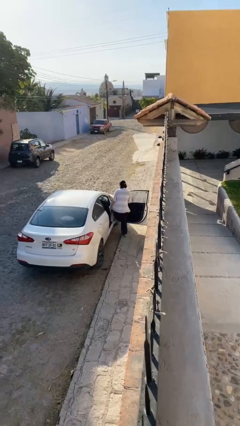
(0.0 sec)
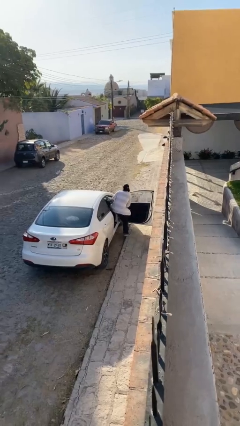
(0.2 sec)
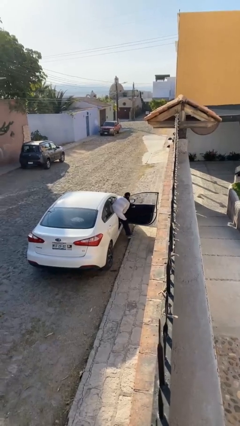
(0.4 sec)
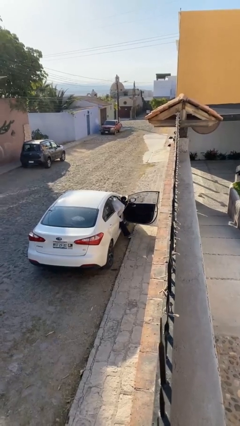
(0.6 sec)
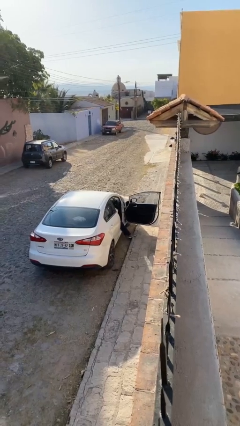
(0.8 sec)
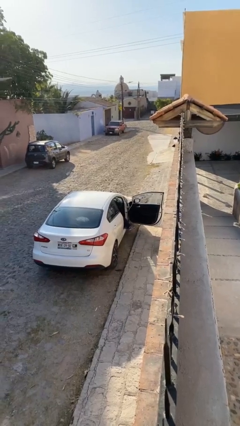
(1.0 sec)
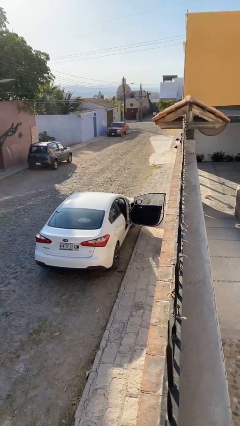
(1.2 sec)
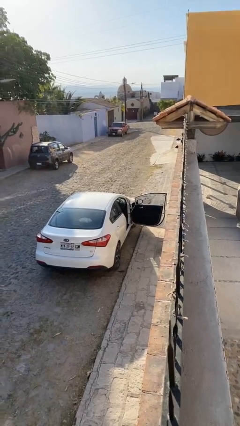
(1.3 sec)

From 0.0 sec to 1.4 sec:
person enters car

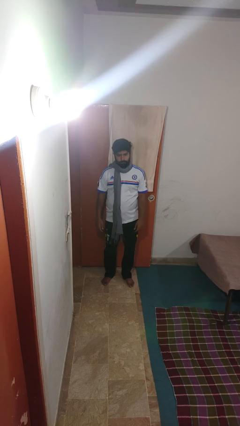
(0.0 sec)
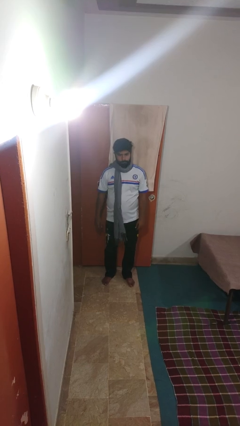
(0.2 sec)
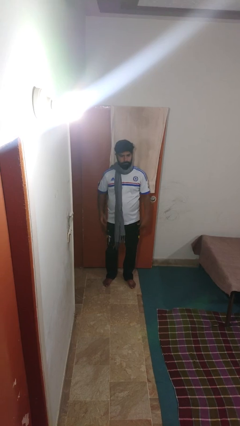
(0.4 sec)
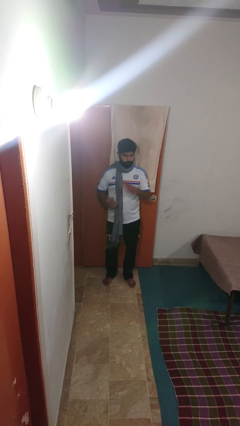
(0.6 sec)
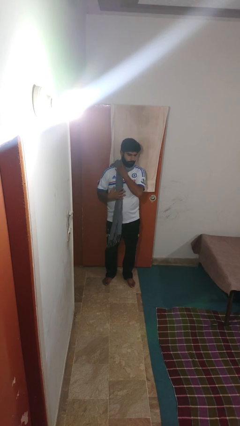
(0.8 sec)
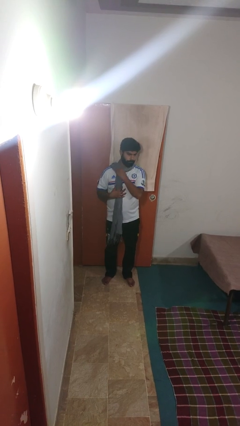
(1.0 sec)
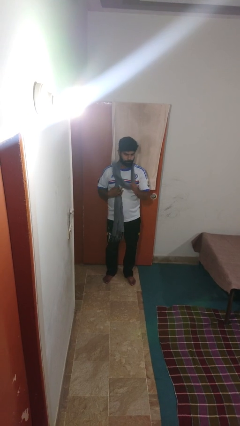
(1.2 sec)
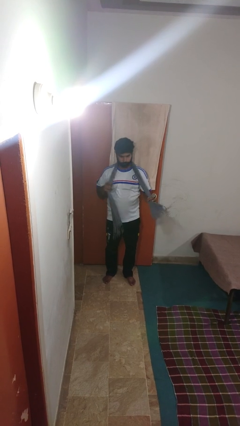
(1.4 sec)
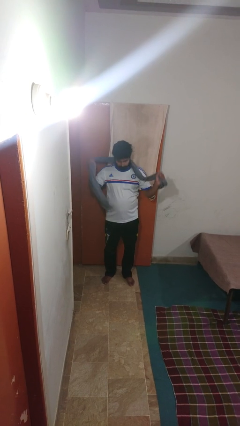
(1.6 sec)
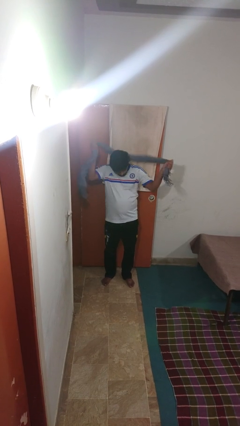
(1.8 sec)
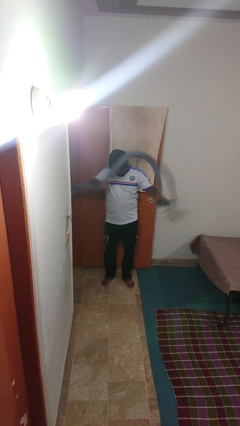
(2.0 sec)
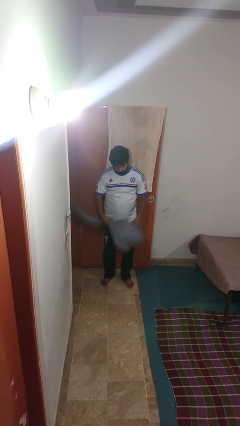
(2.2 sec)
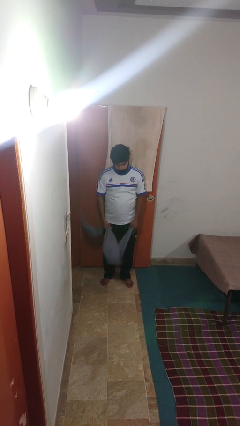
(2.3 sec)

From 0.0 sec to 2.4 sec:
person takes off scarf

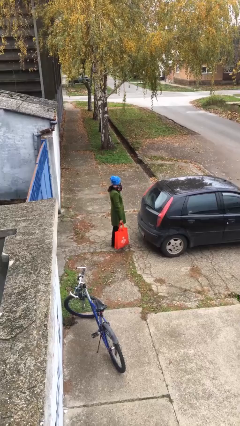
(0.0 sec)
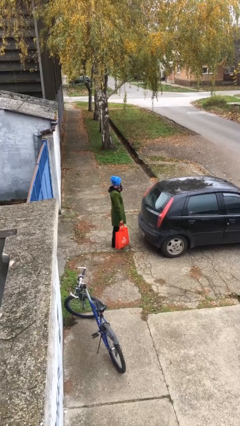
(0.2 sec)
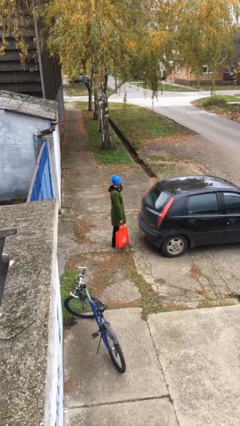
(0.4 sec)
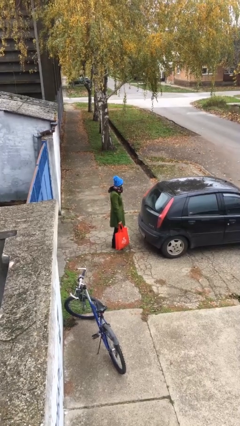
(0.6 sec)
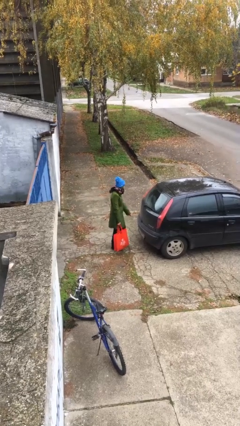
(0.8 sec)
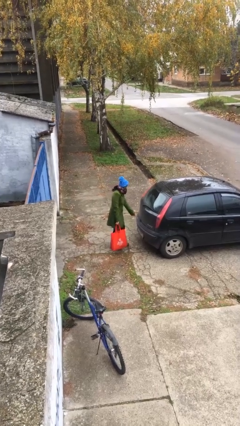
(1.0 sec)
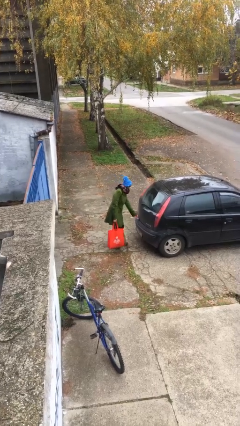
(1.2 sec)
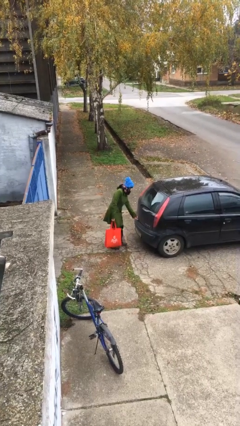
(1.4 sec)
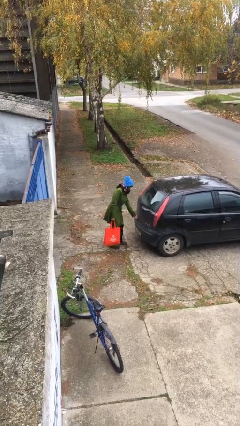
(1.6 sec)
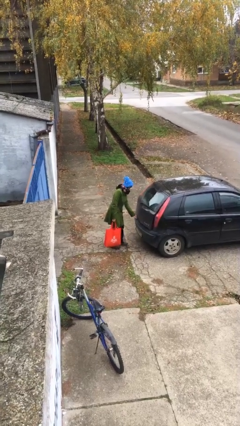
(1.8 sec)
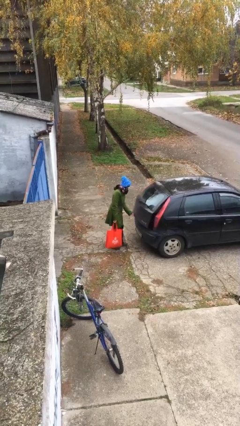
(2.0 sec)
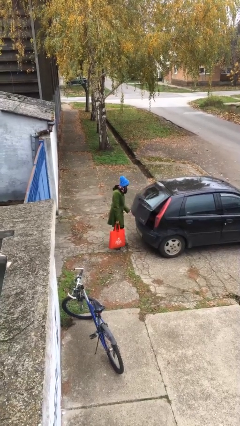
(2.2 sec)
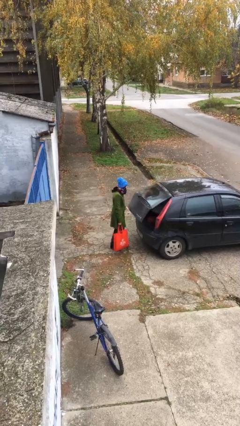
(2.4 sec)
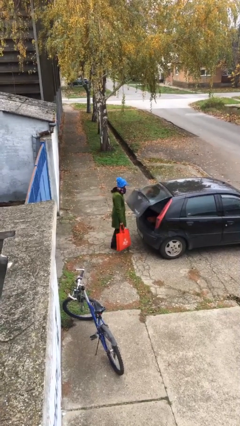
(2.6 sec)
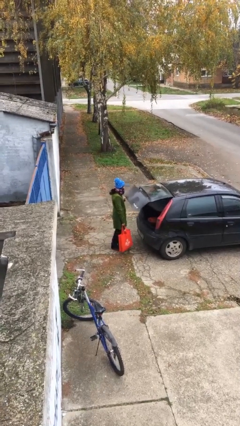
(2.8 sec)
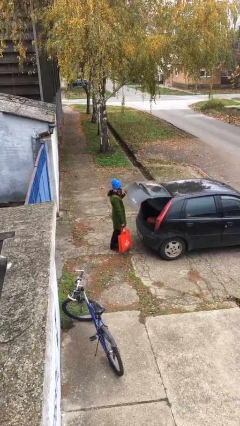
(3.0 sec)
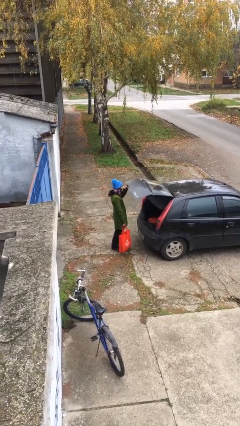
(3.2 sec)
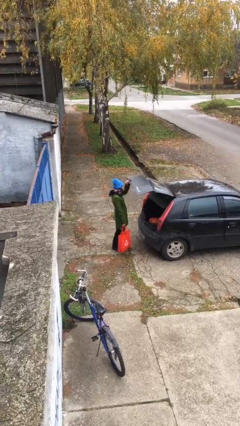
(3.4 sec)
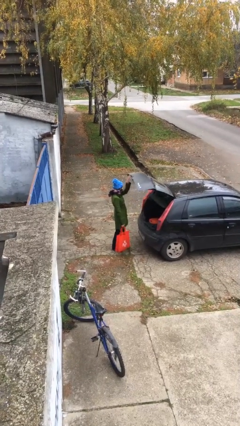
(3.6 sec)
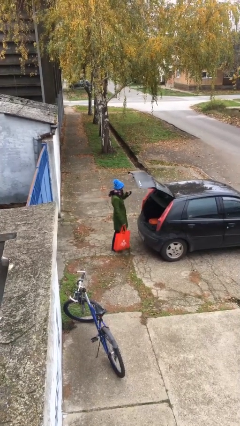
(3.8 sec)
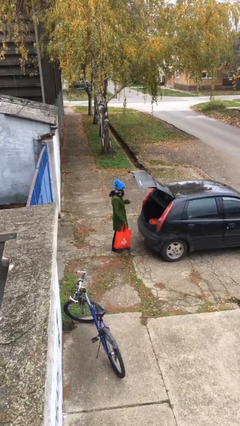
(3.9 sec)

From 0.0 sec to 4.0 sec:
person opens car trunk

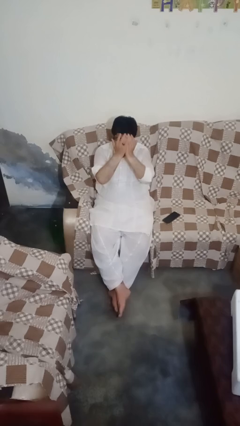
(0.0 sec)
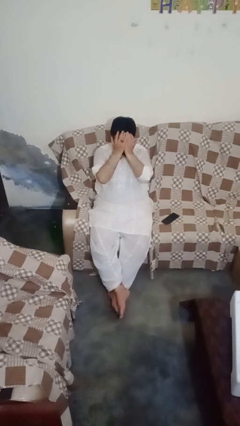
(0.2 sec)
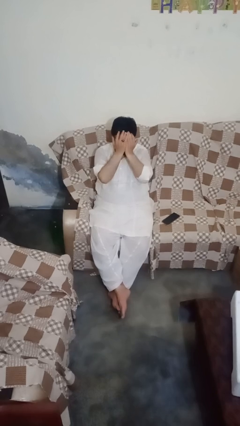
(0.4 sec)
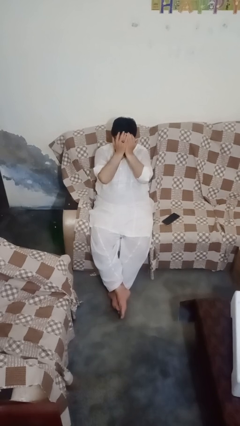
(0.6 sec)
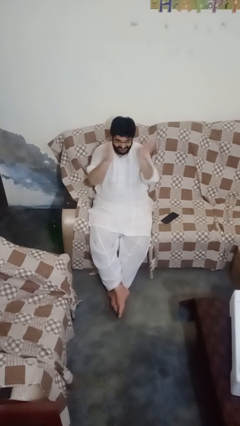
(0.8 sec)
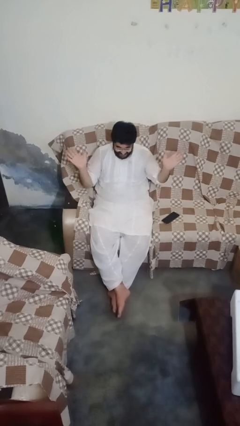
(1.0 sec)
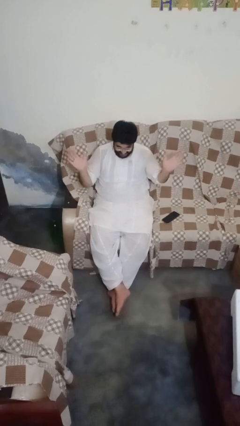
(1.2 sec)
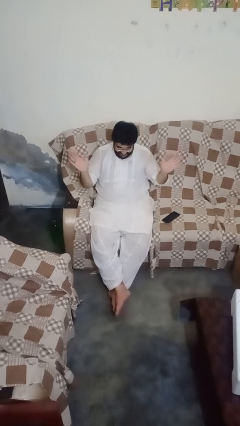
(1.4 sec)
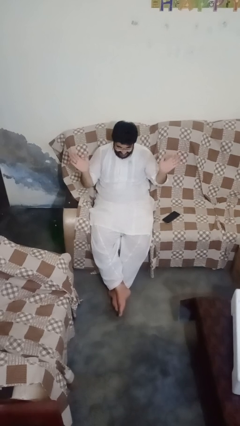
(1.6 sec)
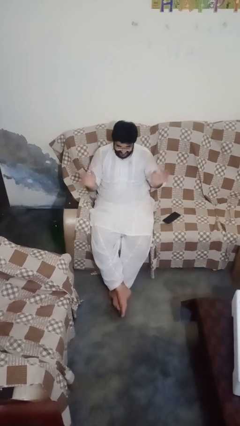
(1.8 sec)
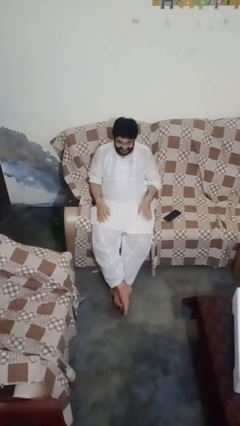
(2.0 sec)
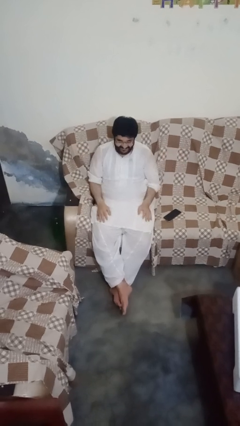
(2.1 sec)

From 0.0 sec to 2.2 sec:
person covers face with hands

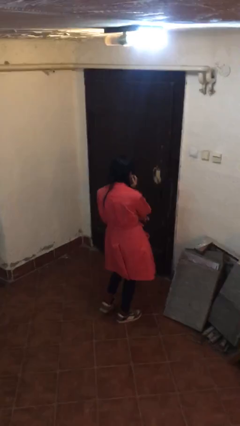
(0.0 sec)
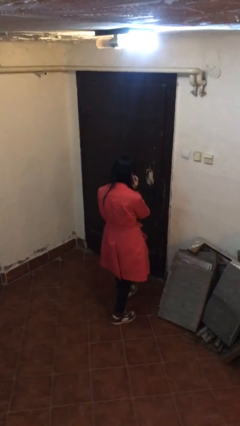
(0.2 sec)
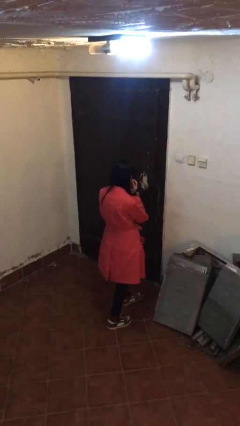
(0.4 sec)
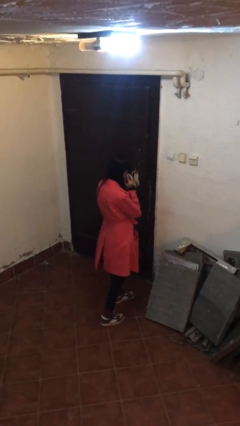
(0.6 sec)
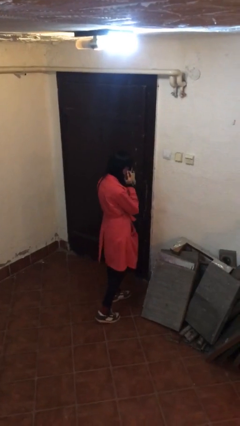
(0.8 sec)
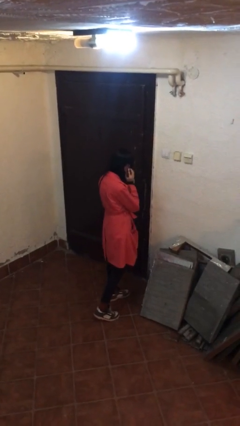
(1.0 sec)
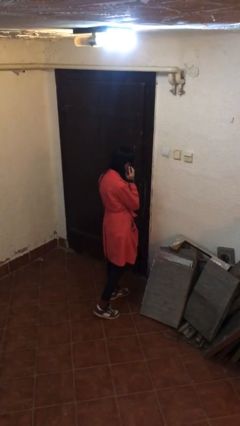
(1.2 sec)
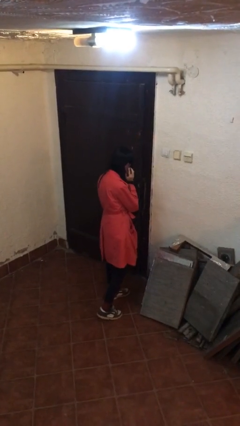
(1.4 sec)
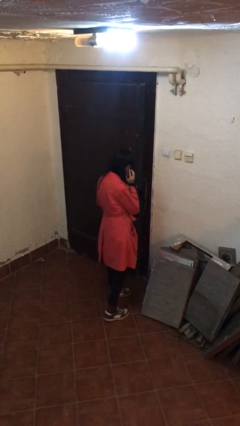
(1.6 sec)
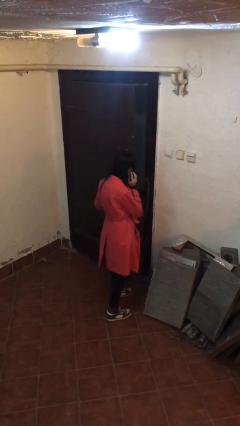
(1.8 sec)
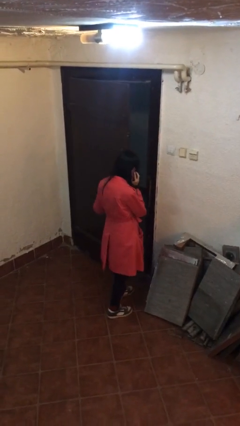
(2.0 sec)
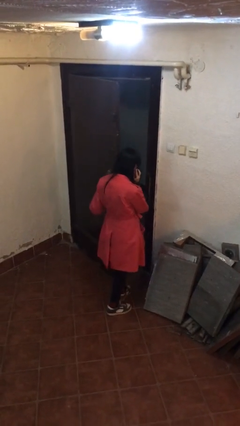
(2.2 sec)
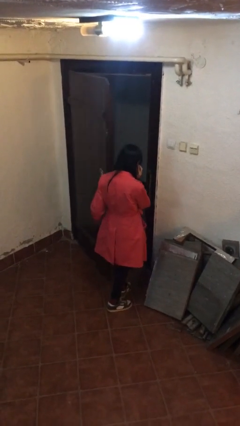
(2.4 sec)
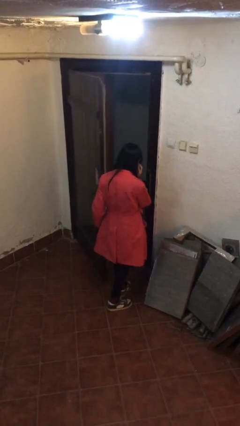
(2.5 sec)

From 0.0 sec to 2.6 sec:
person opens facility door

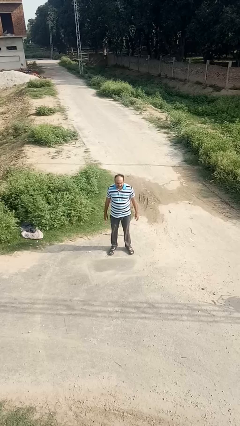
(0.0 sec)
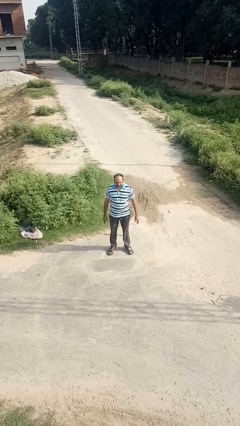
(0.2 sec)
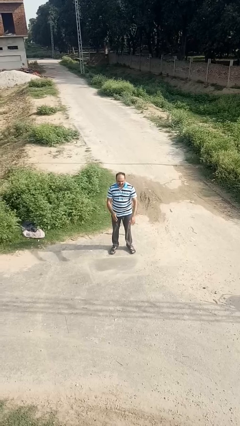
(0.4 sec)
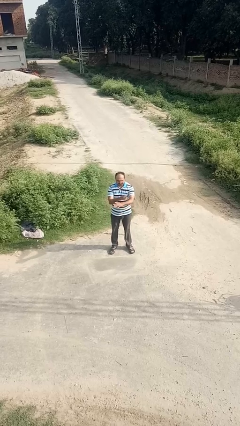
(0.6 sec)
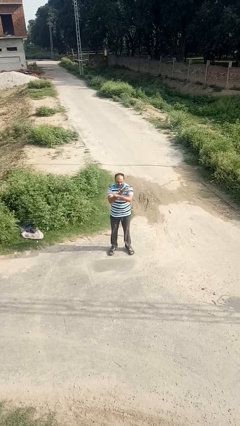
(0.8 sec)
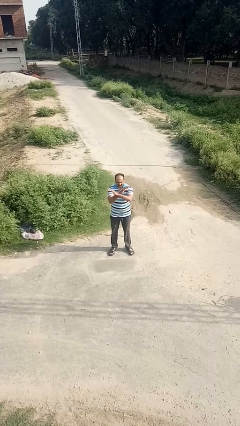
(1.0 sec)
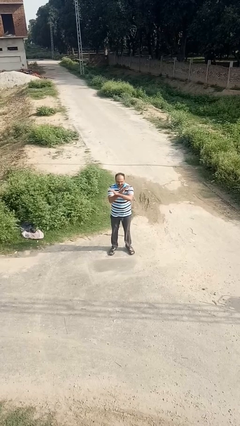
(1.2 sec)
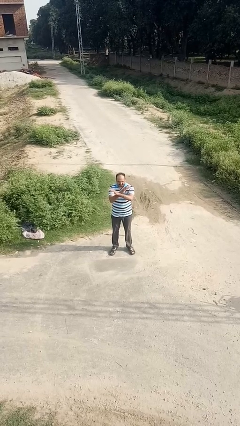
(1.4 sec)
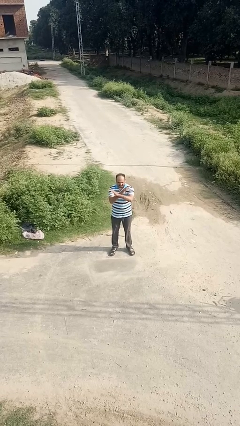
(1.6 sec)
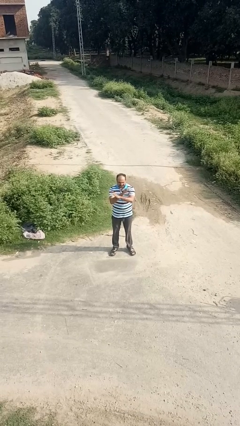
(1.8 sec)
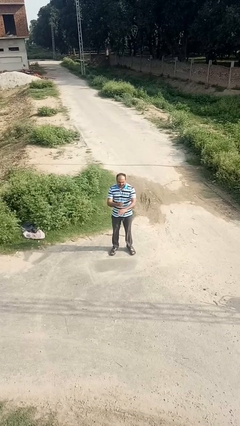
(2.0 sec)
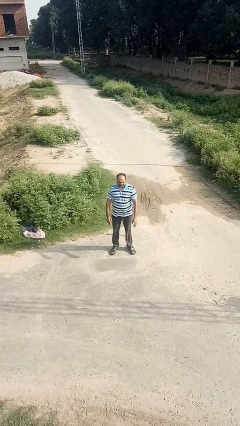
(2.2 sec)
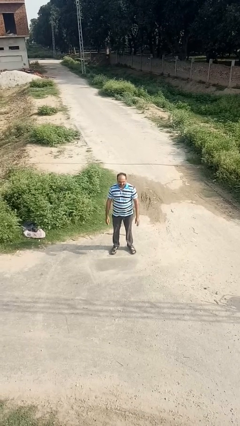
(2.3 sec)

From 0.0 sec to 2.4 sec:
person crosses arms

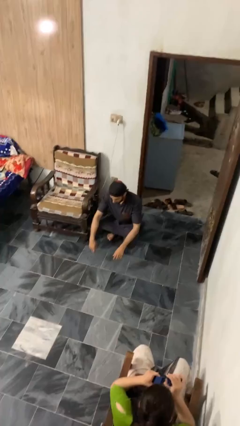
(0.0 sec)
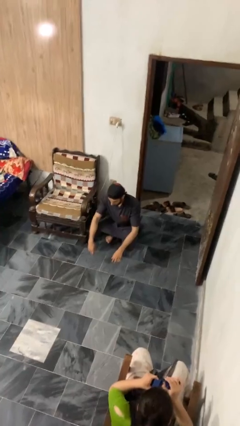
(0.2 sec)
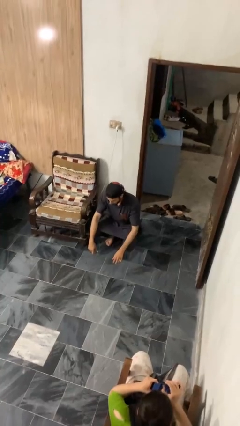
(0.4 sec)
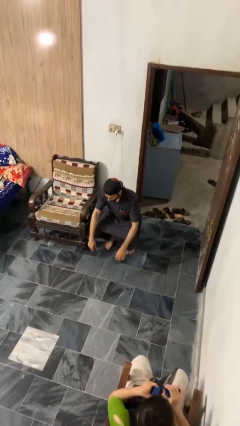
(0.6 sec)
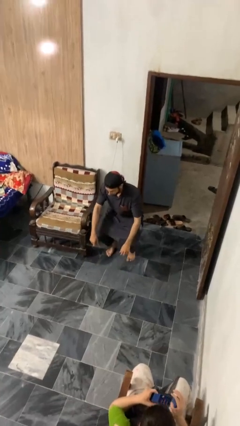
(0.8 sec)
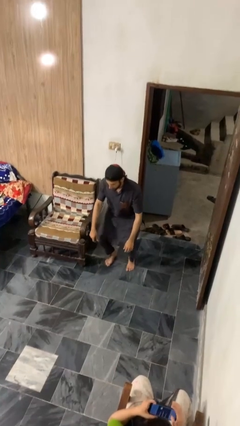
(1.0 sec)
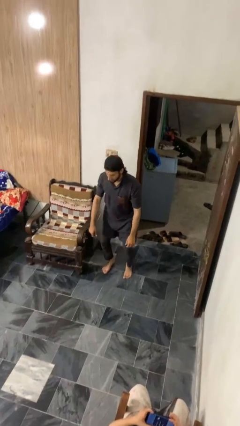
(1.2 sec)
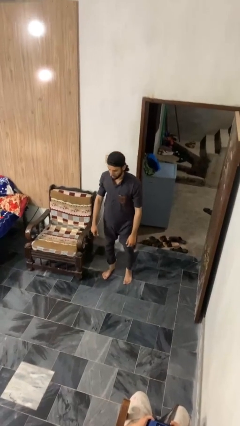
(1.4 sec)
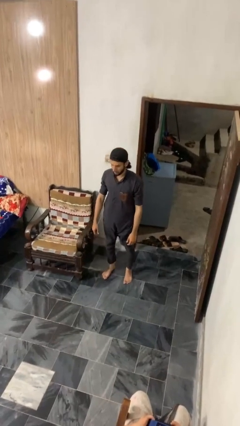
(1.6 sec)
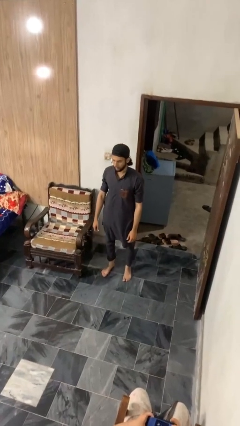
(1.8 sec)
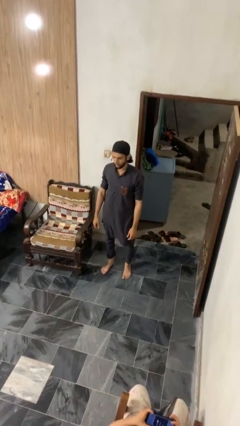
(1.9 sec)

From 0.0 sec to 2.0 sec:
person stands up
